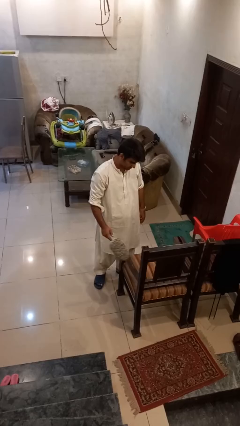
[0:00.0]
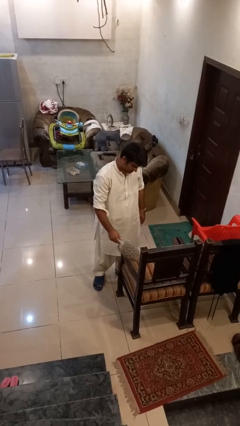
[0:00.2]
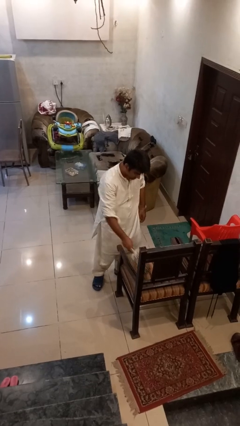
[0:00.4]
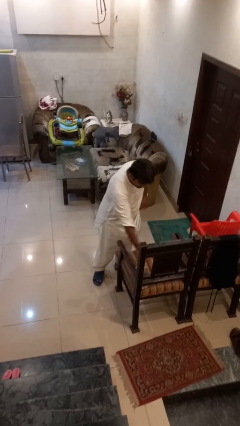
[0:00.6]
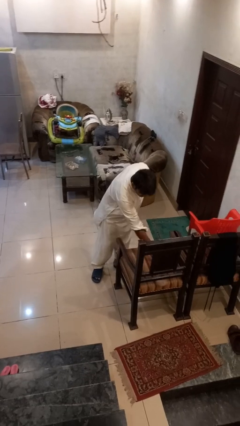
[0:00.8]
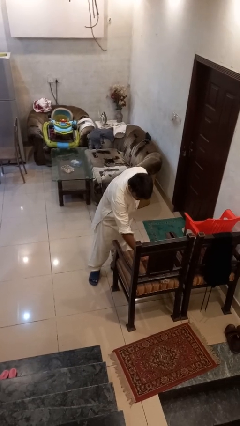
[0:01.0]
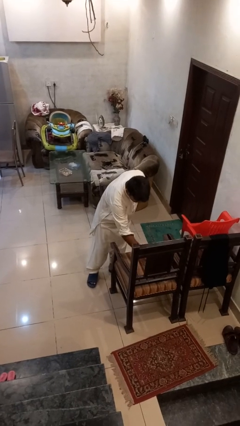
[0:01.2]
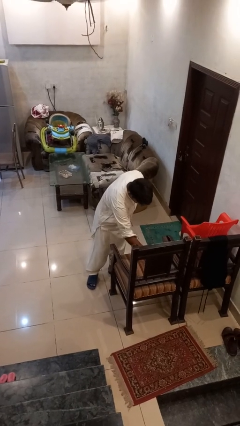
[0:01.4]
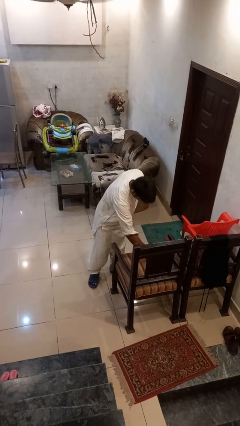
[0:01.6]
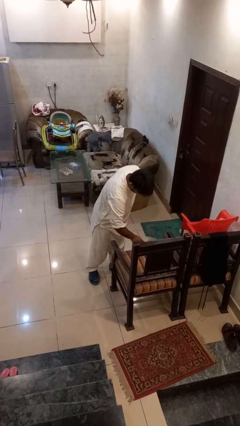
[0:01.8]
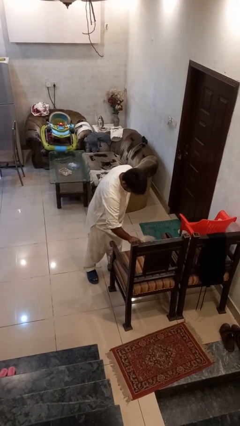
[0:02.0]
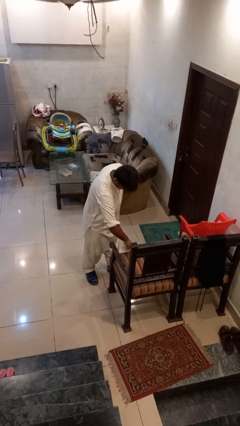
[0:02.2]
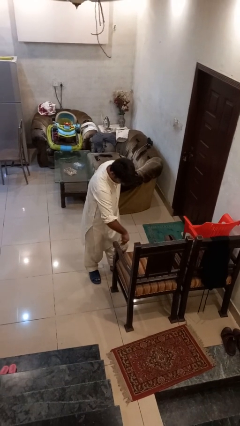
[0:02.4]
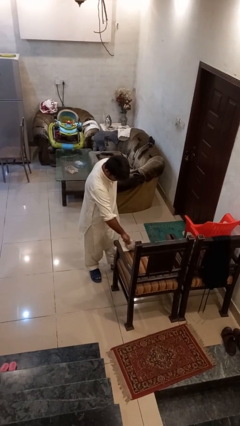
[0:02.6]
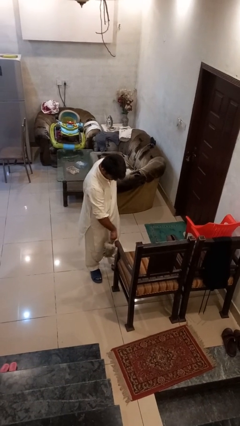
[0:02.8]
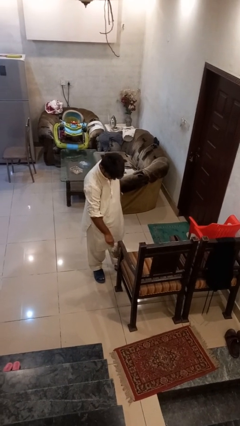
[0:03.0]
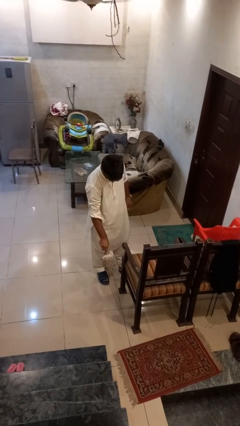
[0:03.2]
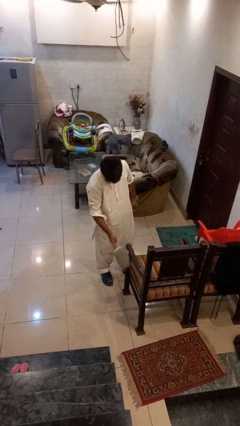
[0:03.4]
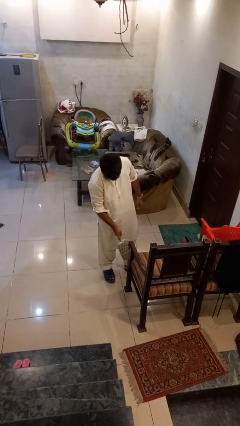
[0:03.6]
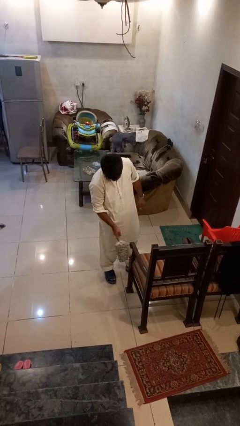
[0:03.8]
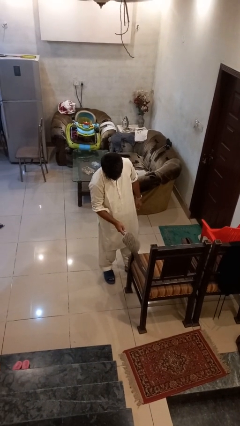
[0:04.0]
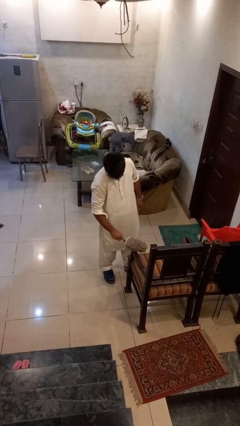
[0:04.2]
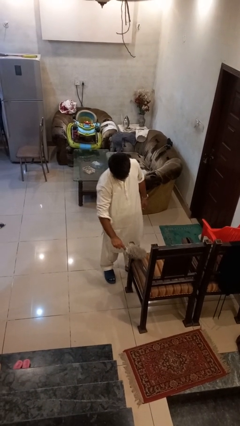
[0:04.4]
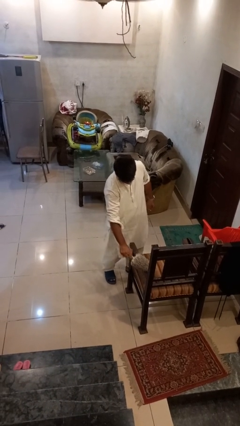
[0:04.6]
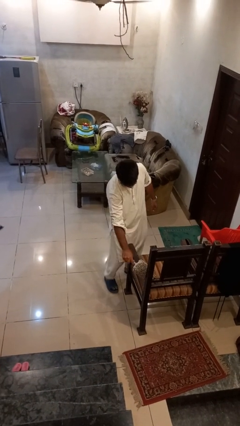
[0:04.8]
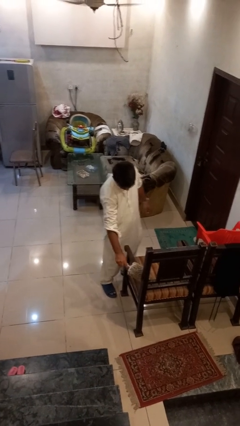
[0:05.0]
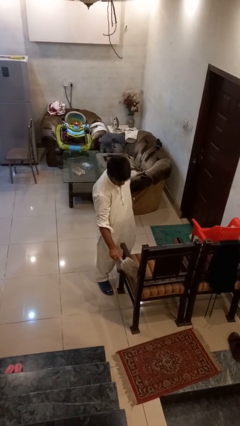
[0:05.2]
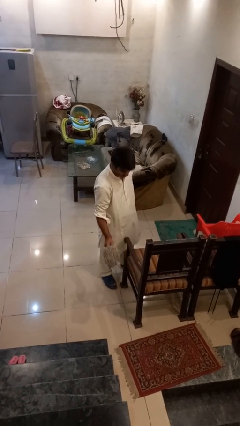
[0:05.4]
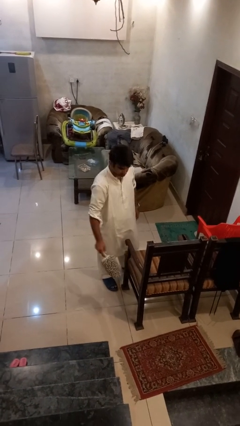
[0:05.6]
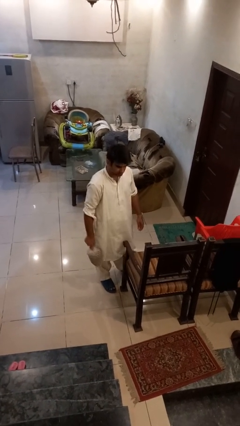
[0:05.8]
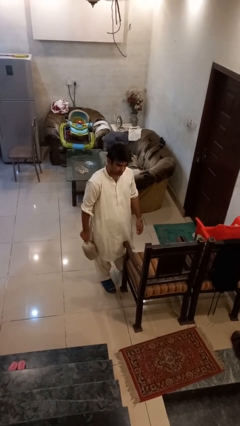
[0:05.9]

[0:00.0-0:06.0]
person dusts furniture

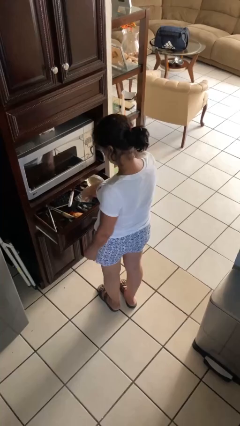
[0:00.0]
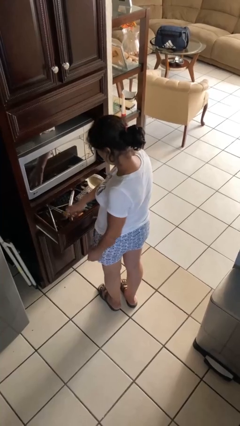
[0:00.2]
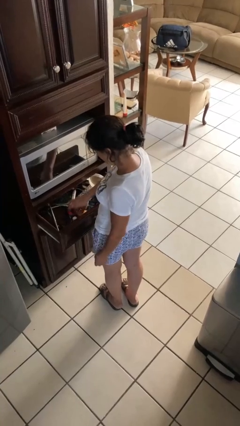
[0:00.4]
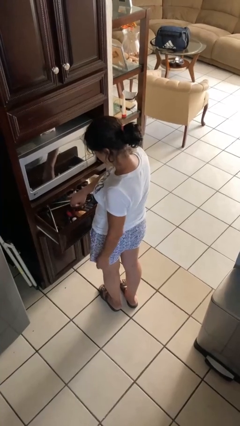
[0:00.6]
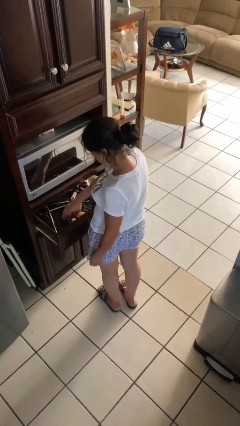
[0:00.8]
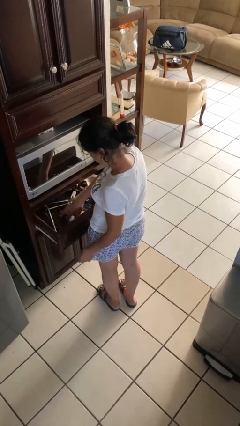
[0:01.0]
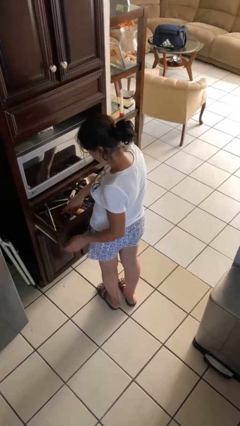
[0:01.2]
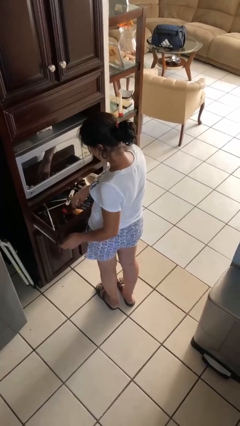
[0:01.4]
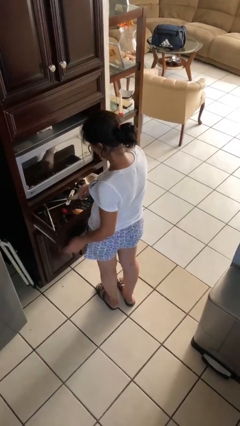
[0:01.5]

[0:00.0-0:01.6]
person searches in kitchen drawer

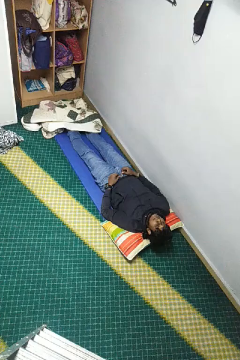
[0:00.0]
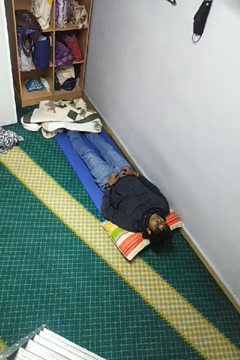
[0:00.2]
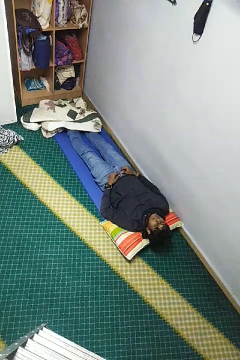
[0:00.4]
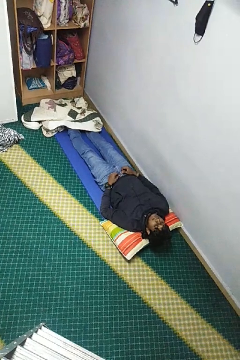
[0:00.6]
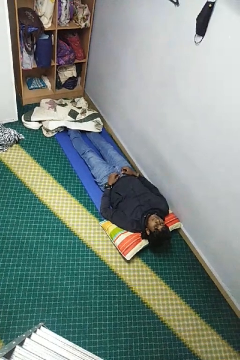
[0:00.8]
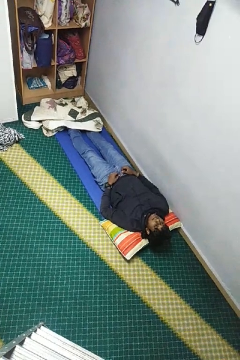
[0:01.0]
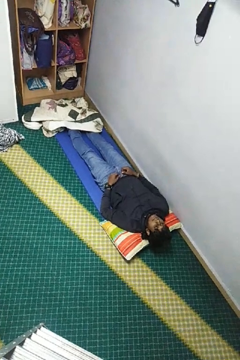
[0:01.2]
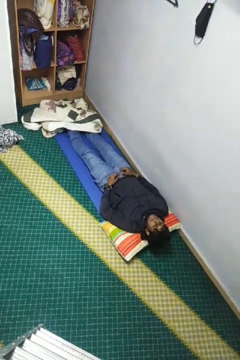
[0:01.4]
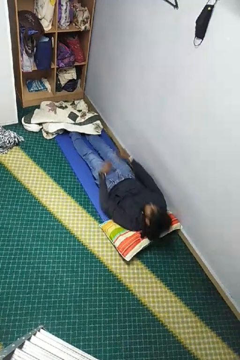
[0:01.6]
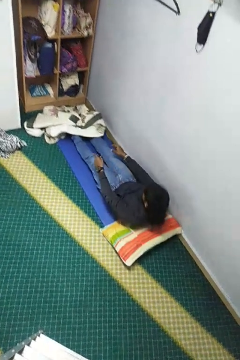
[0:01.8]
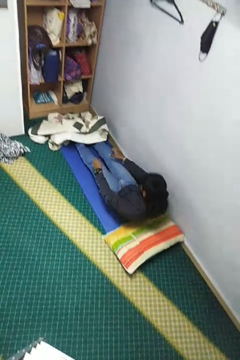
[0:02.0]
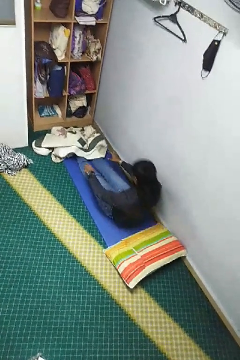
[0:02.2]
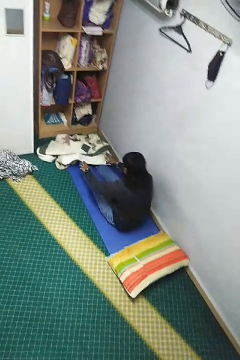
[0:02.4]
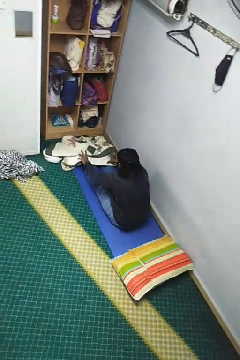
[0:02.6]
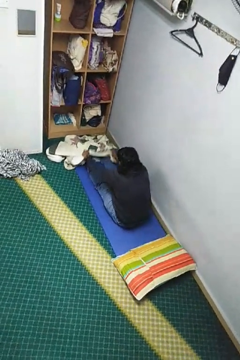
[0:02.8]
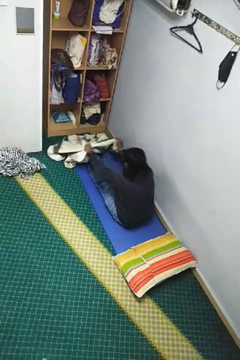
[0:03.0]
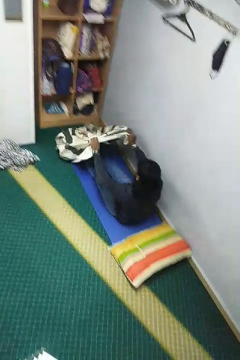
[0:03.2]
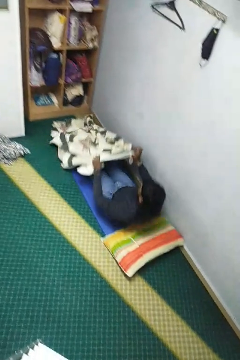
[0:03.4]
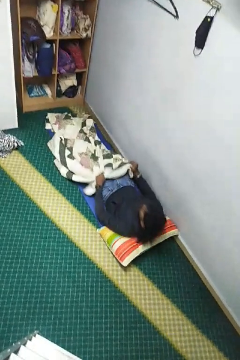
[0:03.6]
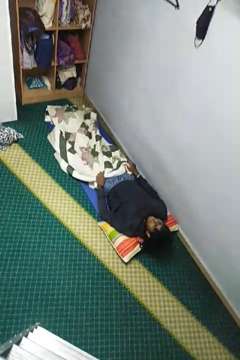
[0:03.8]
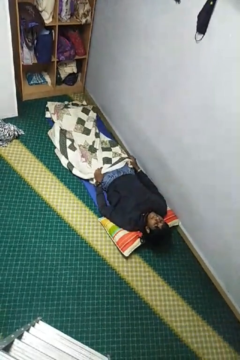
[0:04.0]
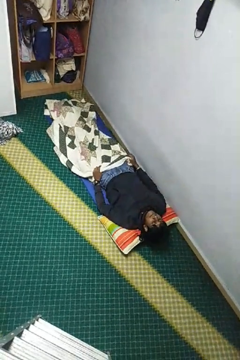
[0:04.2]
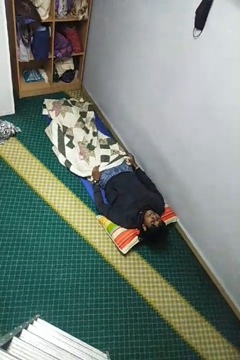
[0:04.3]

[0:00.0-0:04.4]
person covers with bedsheets

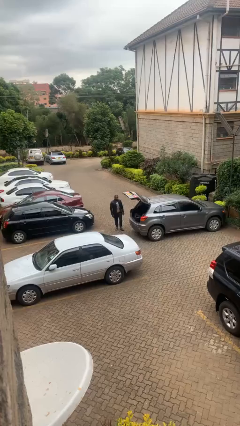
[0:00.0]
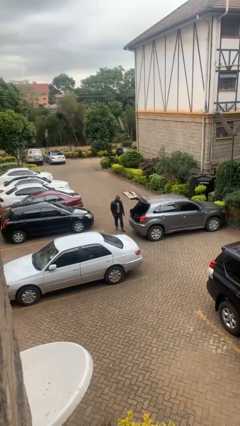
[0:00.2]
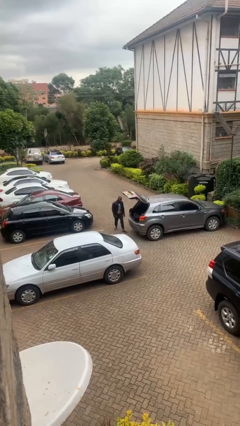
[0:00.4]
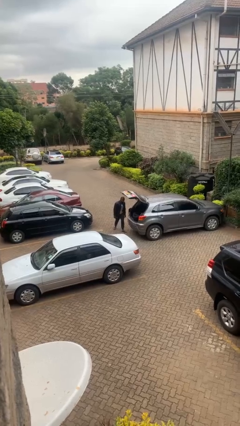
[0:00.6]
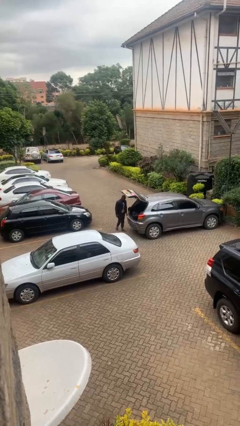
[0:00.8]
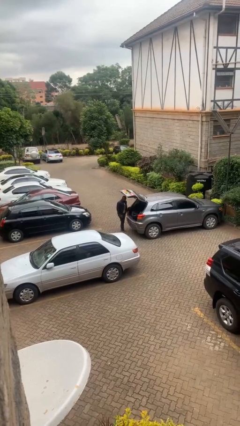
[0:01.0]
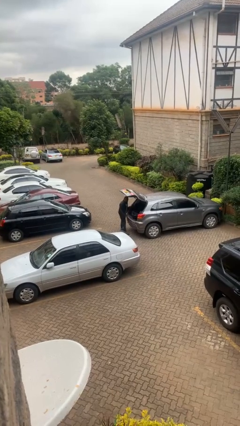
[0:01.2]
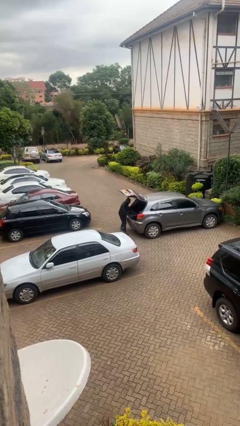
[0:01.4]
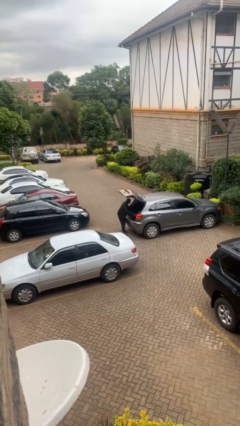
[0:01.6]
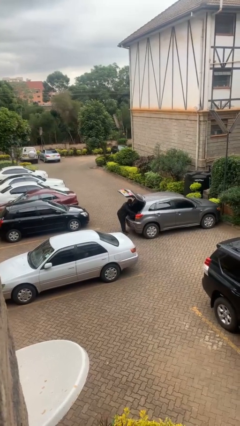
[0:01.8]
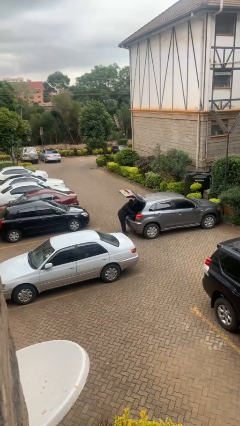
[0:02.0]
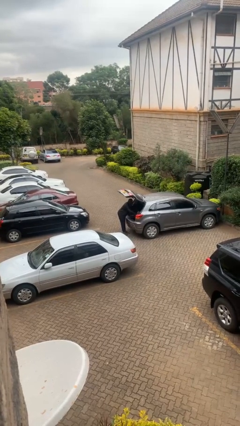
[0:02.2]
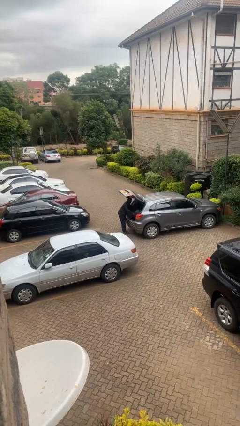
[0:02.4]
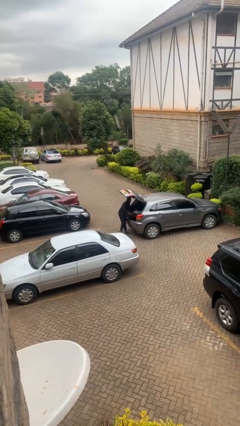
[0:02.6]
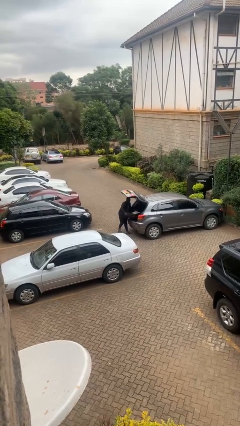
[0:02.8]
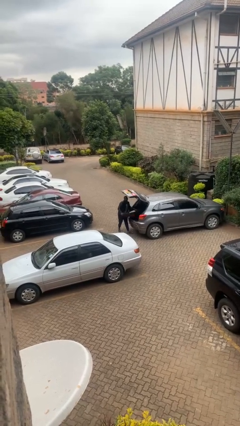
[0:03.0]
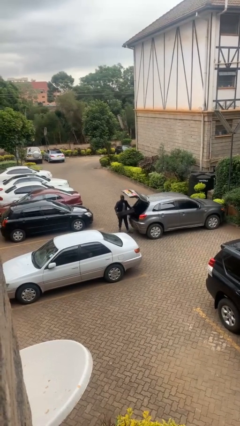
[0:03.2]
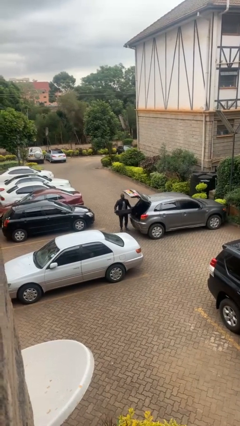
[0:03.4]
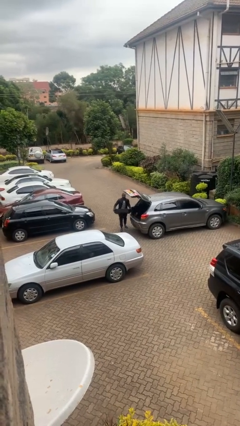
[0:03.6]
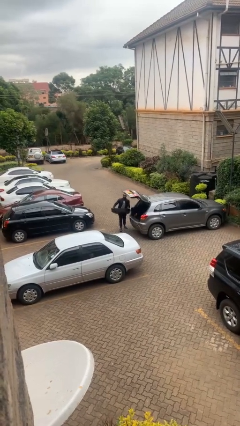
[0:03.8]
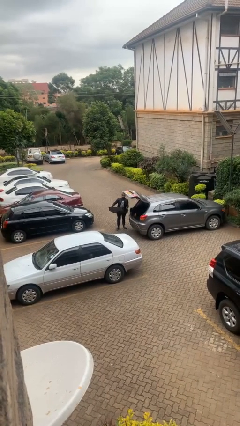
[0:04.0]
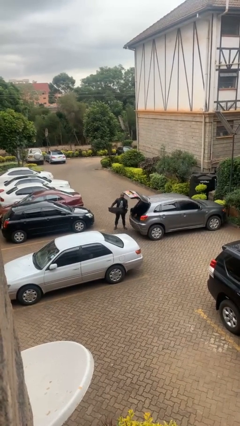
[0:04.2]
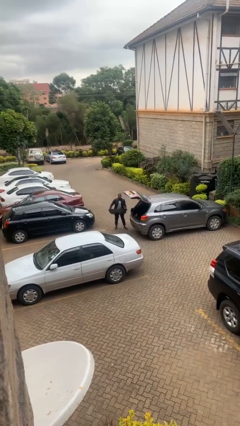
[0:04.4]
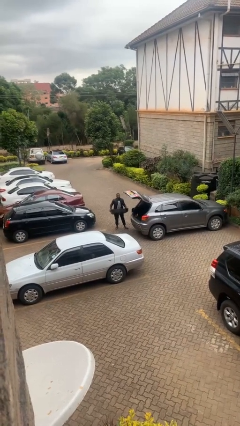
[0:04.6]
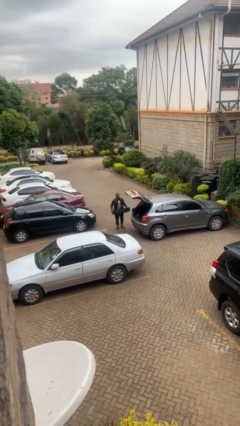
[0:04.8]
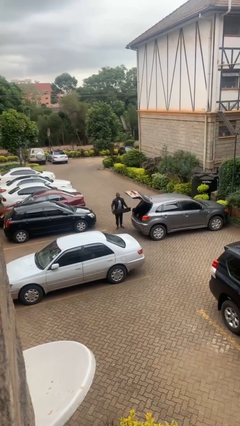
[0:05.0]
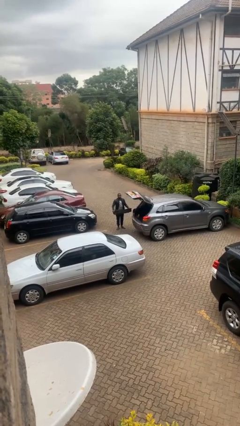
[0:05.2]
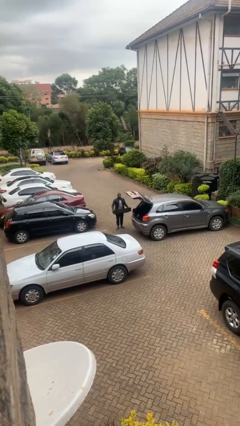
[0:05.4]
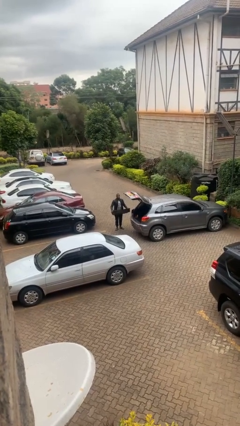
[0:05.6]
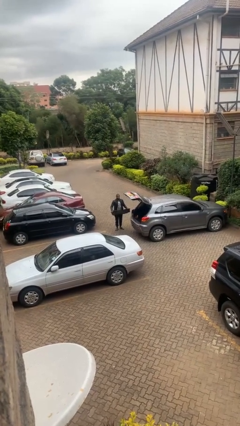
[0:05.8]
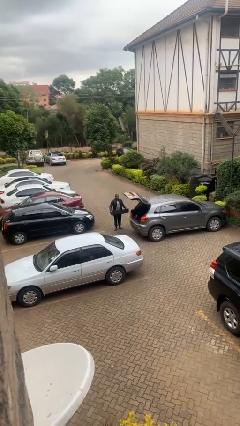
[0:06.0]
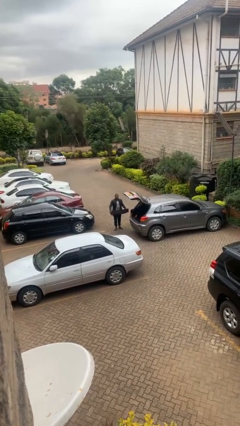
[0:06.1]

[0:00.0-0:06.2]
person unloads car
